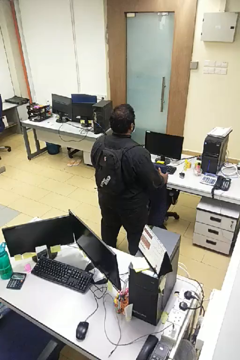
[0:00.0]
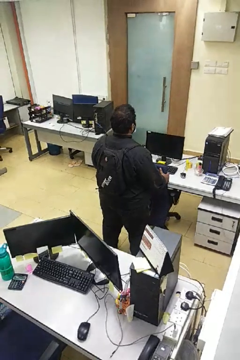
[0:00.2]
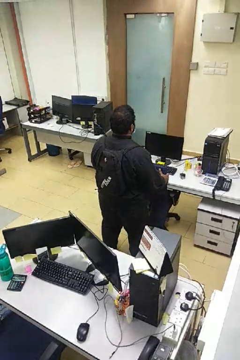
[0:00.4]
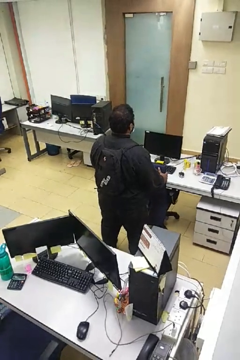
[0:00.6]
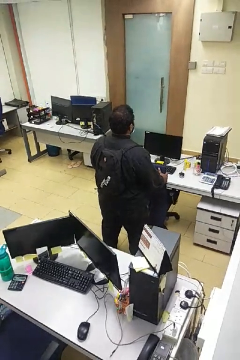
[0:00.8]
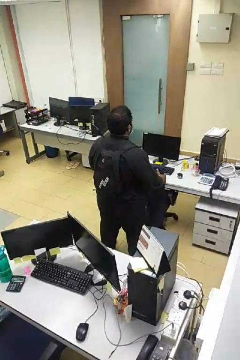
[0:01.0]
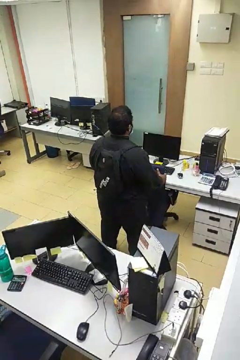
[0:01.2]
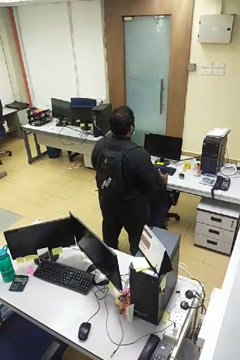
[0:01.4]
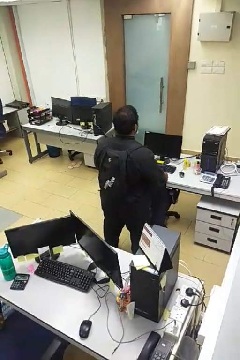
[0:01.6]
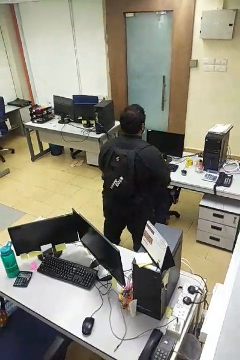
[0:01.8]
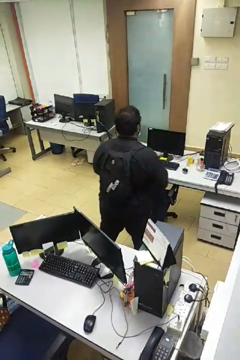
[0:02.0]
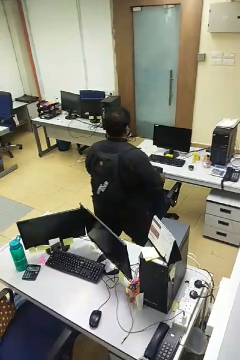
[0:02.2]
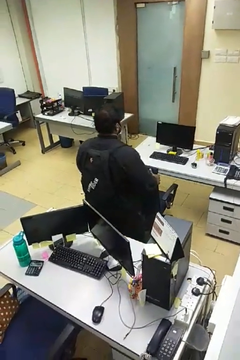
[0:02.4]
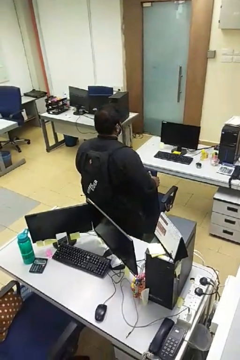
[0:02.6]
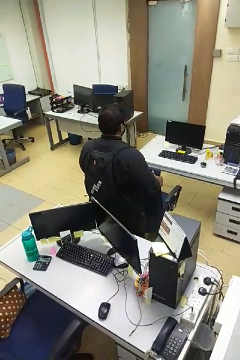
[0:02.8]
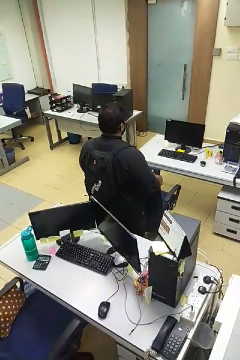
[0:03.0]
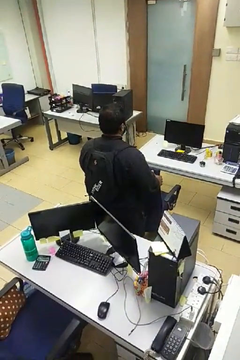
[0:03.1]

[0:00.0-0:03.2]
person pulls out chair

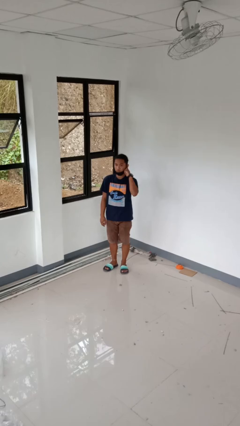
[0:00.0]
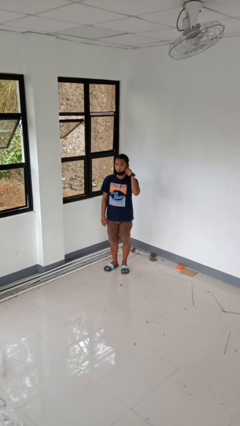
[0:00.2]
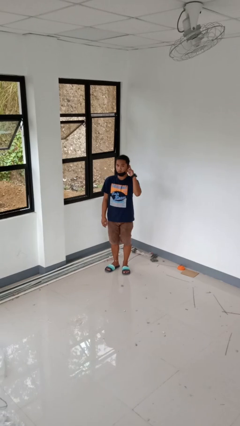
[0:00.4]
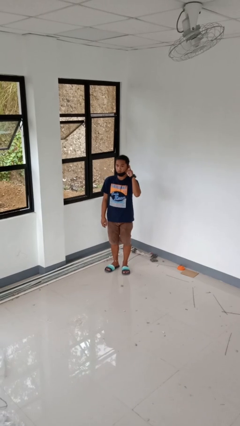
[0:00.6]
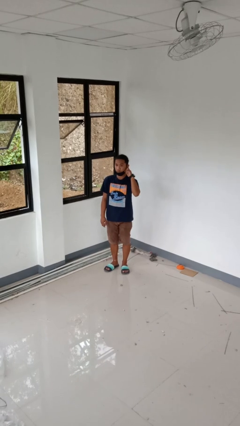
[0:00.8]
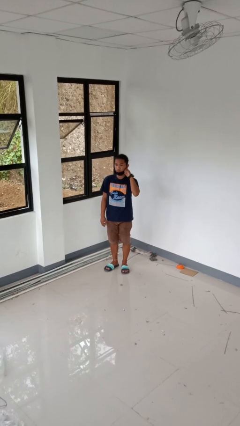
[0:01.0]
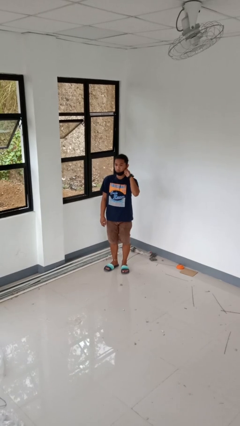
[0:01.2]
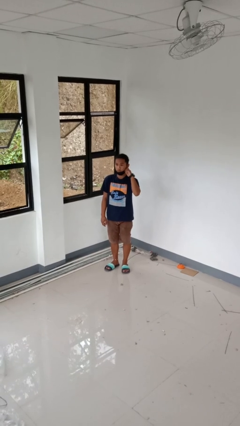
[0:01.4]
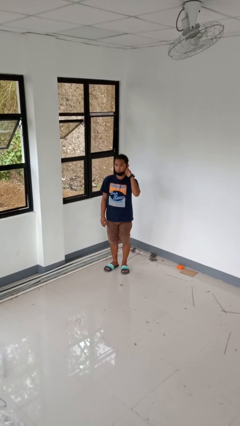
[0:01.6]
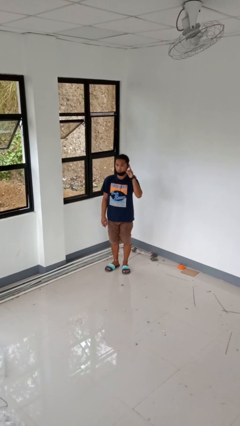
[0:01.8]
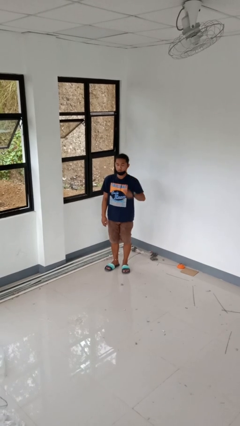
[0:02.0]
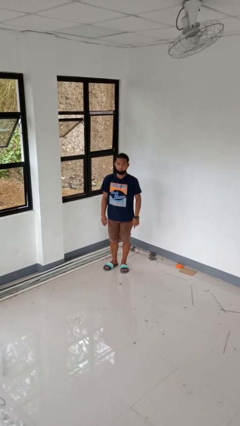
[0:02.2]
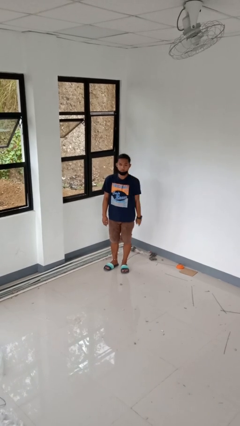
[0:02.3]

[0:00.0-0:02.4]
person gestures listen closely

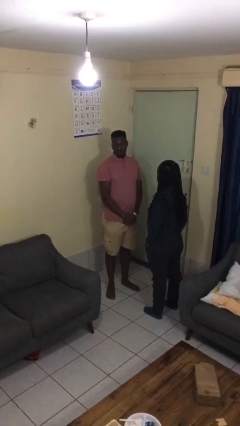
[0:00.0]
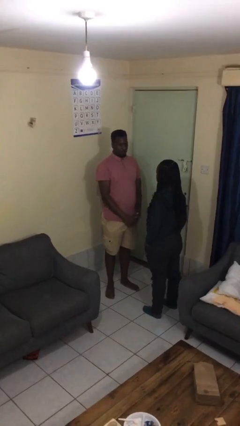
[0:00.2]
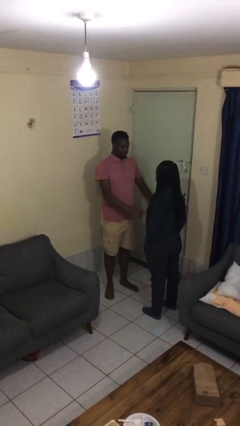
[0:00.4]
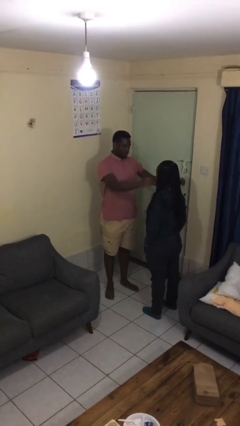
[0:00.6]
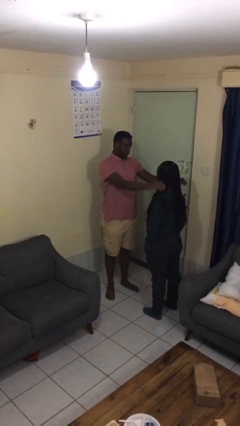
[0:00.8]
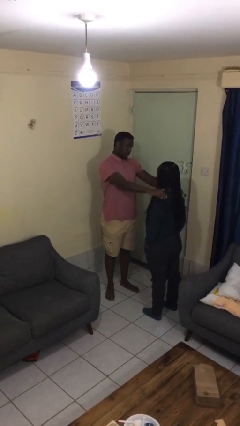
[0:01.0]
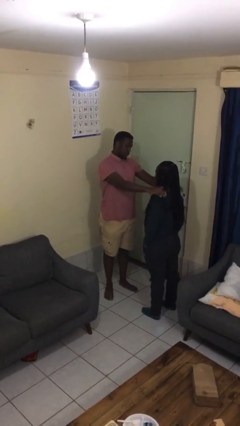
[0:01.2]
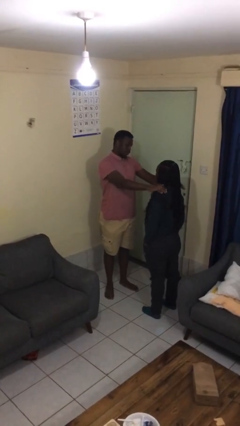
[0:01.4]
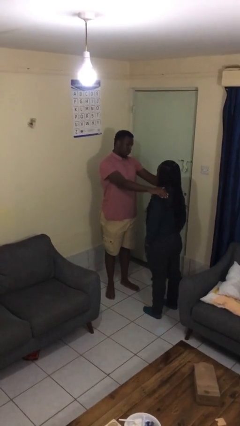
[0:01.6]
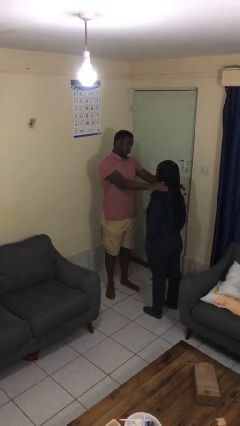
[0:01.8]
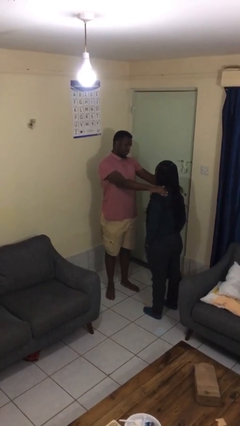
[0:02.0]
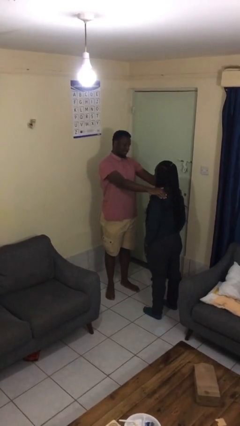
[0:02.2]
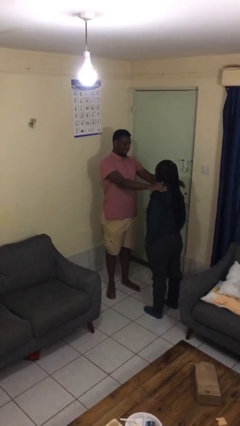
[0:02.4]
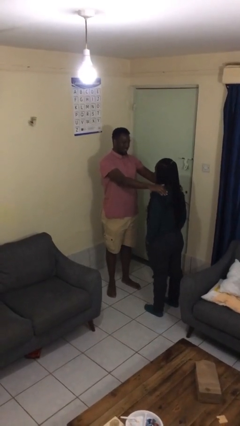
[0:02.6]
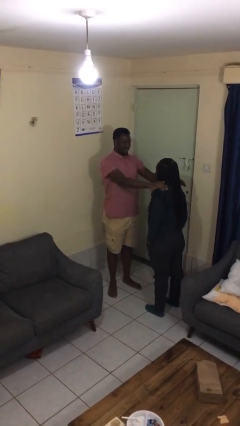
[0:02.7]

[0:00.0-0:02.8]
person pounds shoulders of person

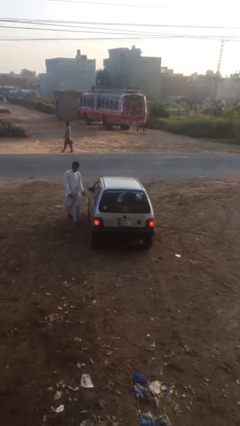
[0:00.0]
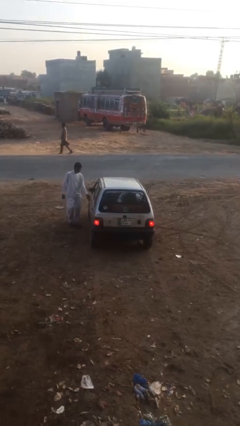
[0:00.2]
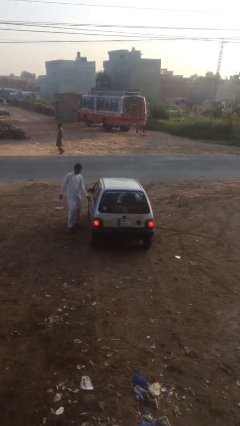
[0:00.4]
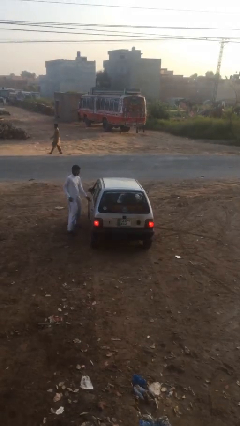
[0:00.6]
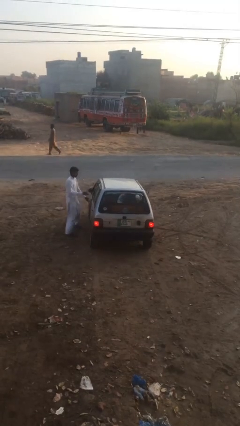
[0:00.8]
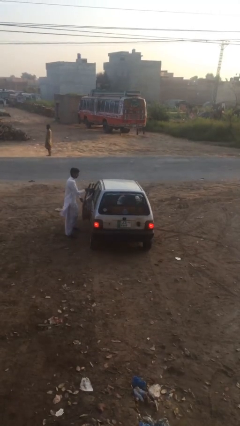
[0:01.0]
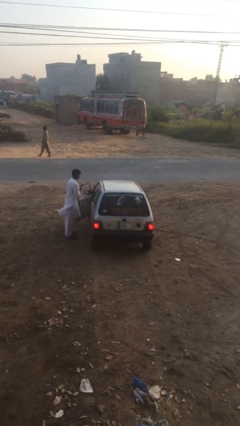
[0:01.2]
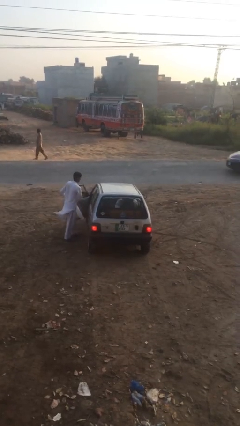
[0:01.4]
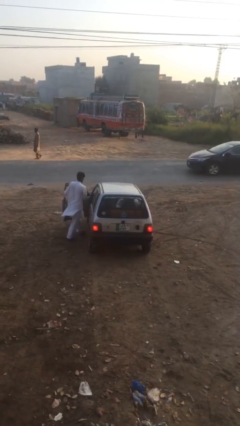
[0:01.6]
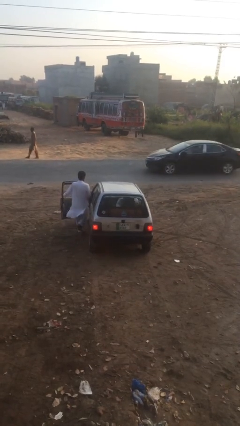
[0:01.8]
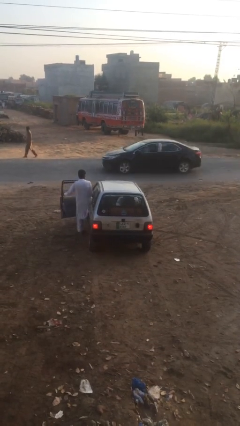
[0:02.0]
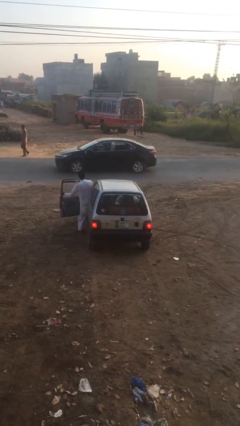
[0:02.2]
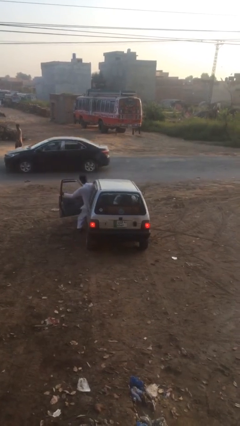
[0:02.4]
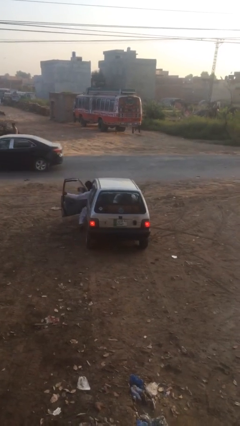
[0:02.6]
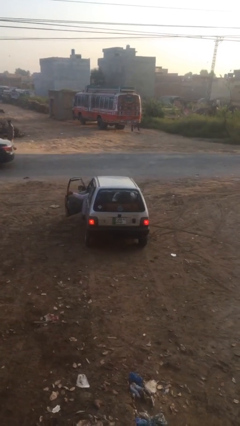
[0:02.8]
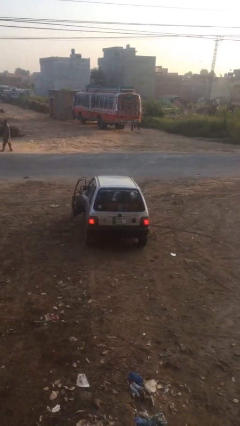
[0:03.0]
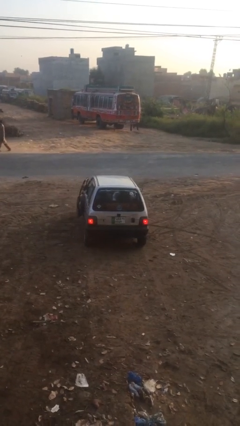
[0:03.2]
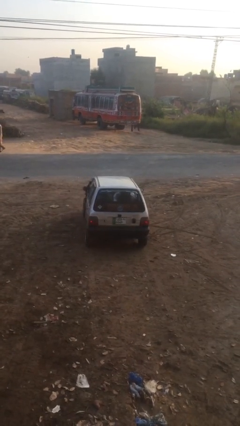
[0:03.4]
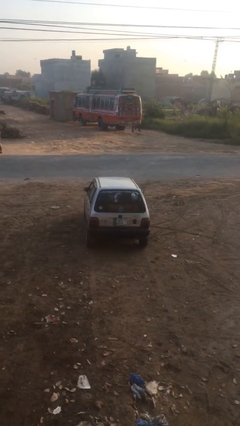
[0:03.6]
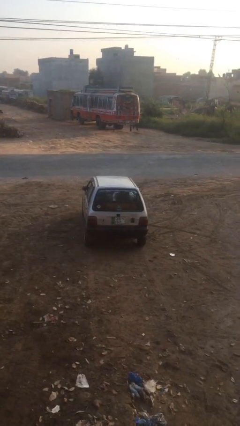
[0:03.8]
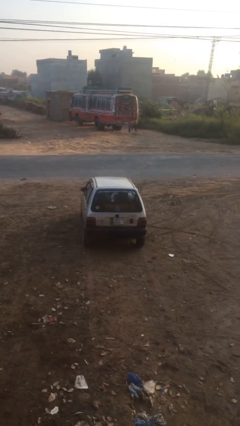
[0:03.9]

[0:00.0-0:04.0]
car picks up person

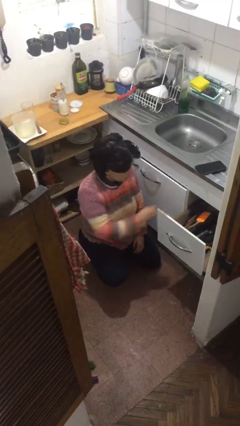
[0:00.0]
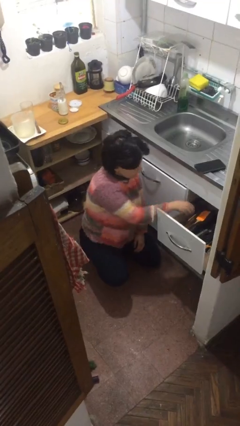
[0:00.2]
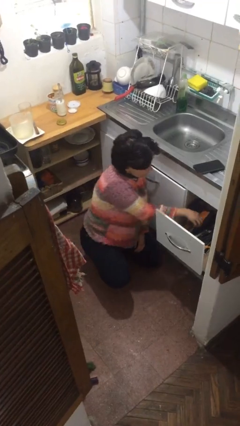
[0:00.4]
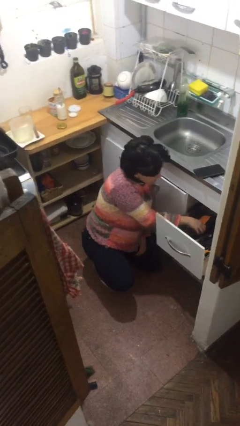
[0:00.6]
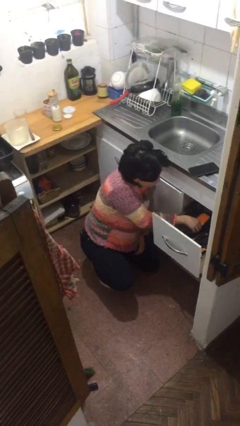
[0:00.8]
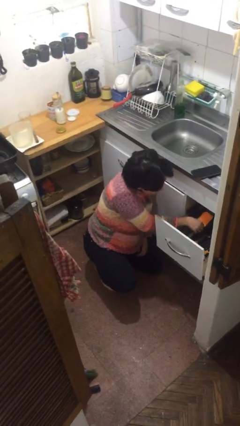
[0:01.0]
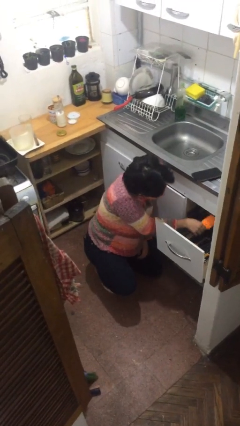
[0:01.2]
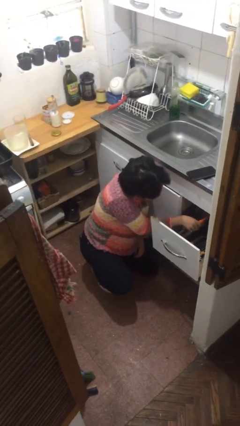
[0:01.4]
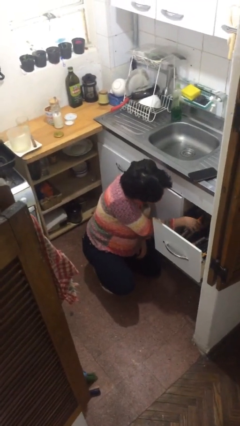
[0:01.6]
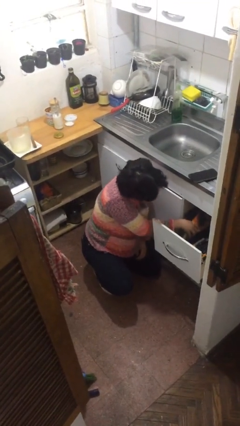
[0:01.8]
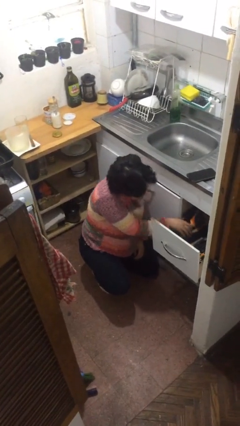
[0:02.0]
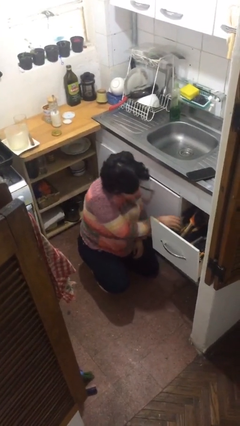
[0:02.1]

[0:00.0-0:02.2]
person searches in kitchen drawer

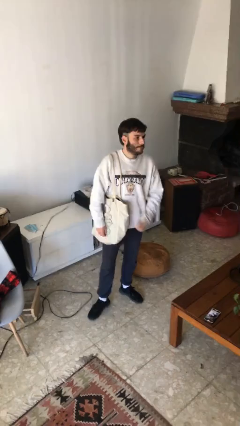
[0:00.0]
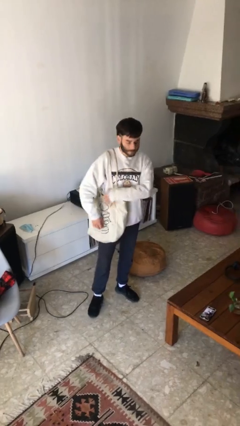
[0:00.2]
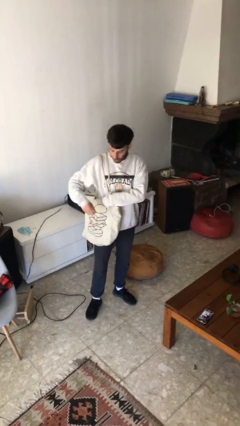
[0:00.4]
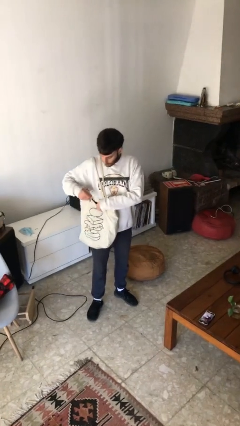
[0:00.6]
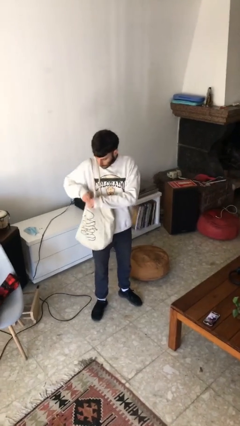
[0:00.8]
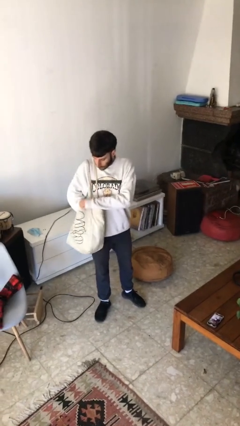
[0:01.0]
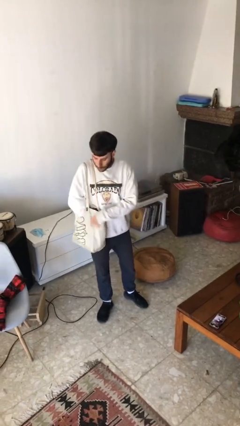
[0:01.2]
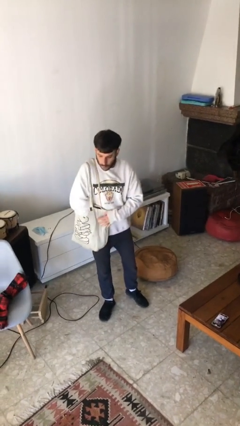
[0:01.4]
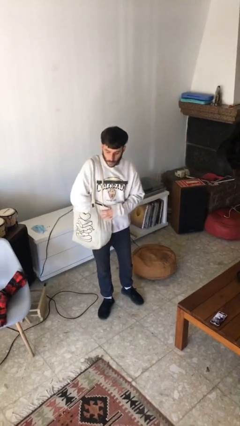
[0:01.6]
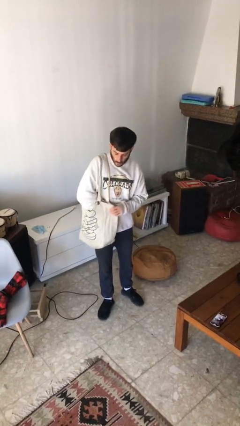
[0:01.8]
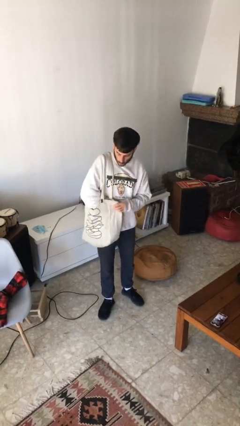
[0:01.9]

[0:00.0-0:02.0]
person searches in purse

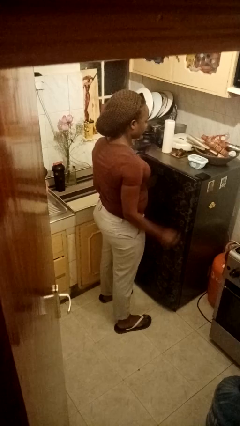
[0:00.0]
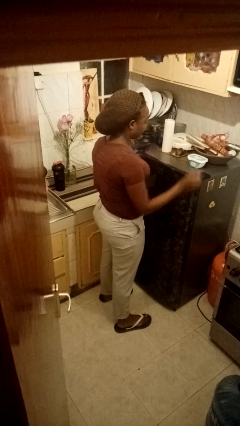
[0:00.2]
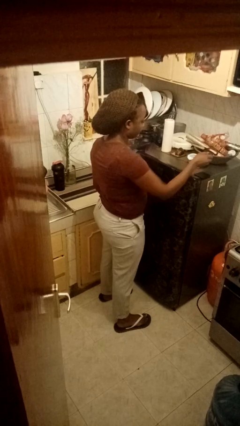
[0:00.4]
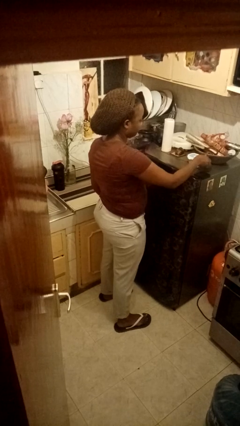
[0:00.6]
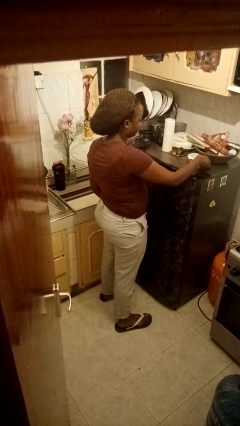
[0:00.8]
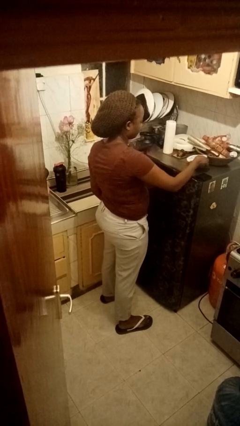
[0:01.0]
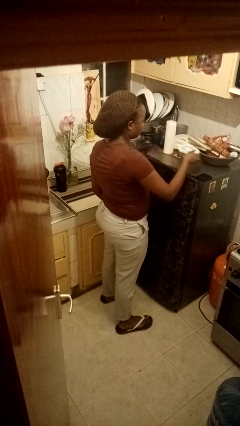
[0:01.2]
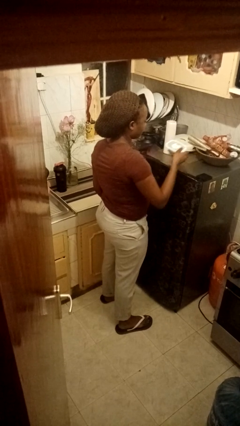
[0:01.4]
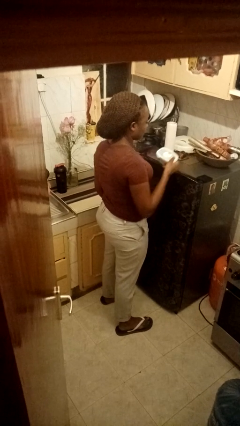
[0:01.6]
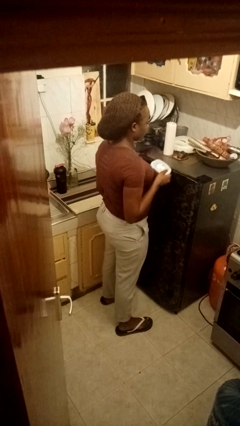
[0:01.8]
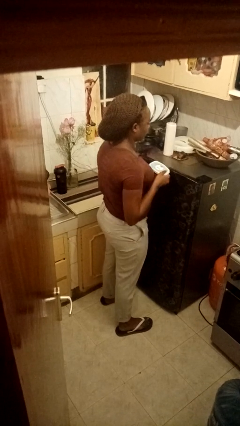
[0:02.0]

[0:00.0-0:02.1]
person picks up object from countertop
